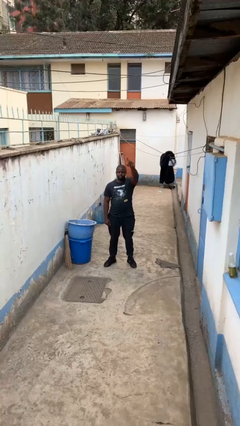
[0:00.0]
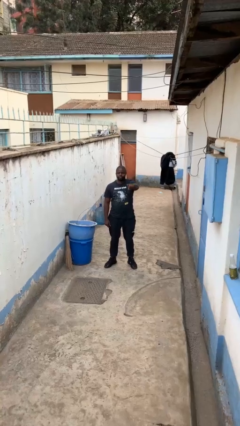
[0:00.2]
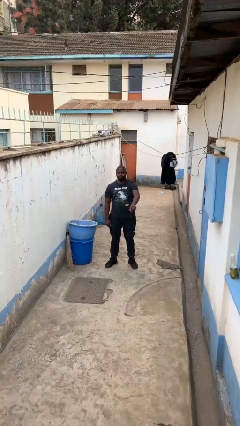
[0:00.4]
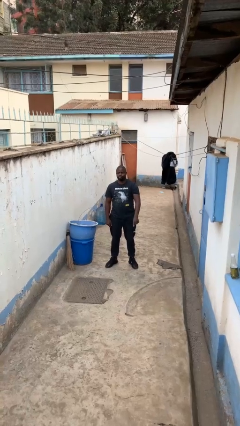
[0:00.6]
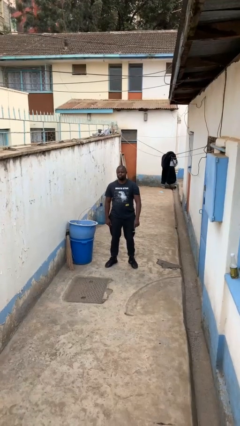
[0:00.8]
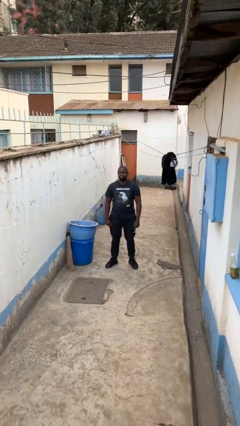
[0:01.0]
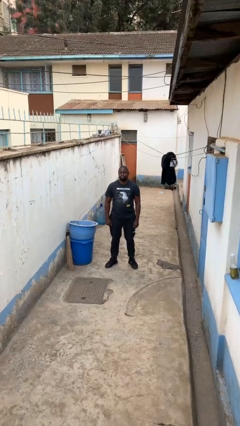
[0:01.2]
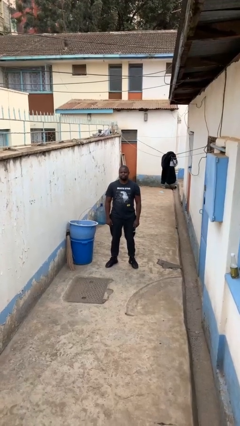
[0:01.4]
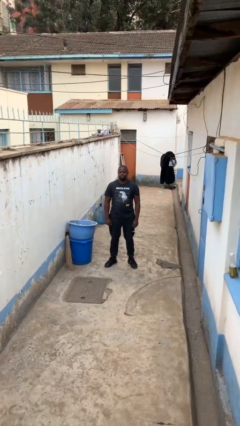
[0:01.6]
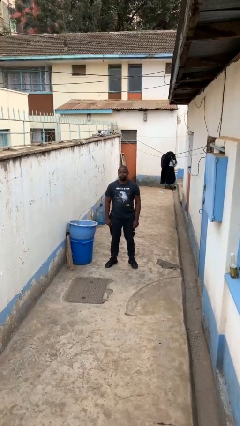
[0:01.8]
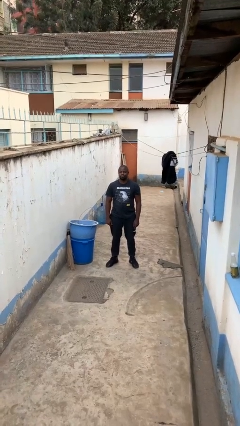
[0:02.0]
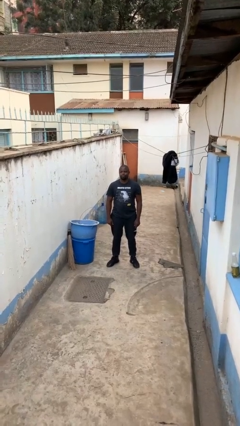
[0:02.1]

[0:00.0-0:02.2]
person gestures swipe down

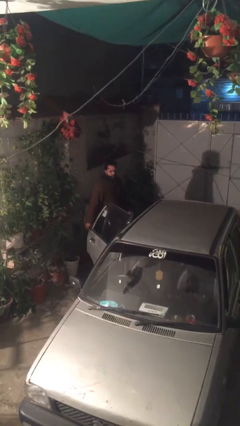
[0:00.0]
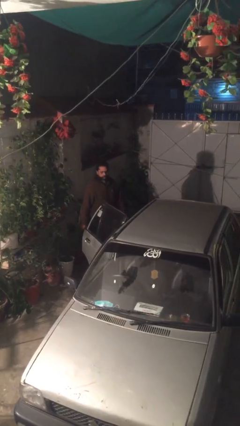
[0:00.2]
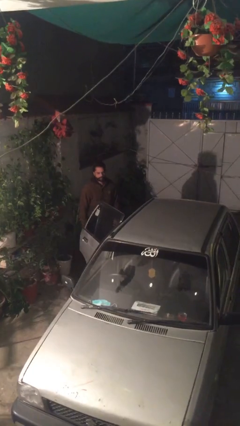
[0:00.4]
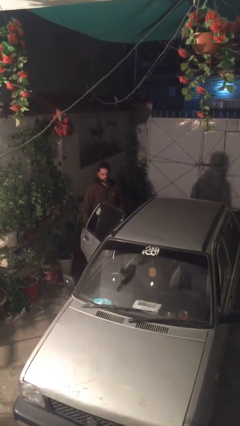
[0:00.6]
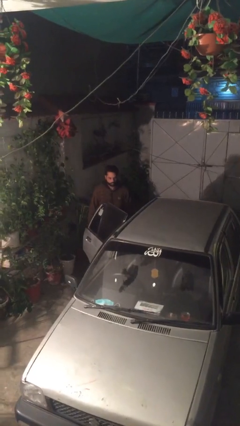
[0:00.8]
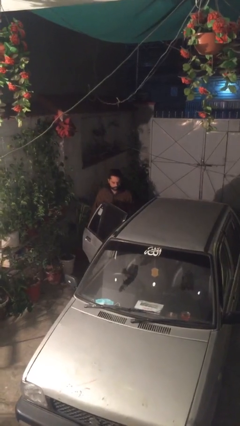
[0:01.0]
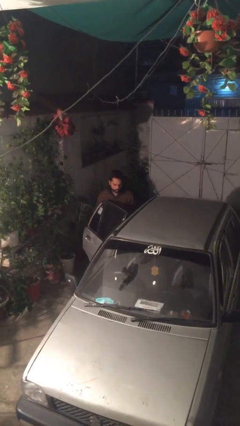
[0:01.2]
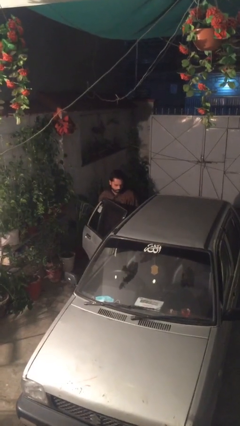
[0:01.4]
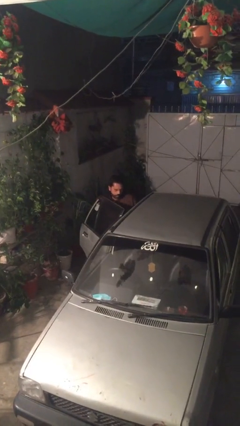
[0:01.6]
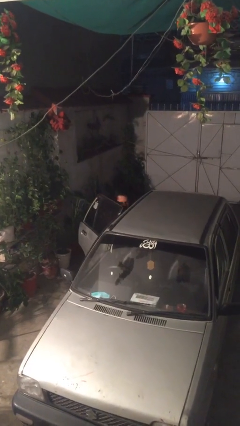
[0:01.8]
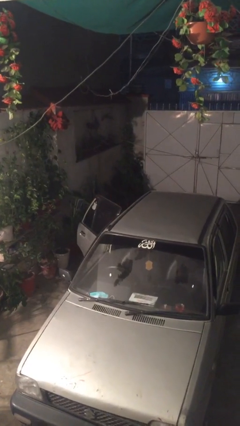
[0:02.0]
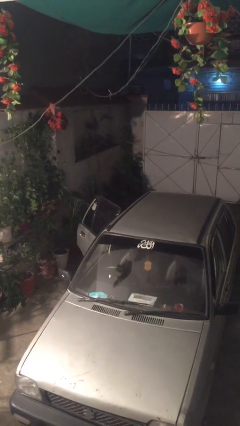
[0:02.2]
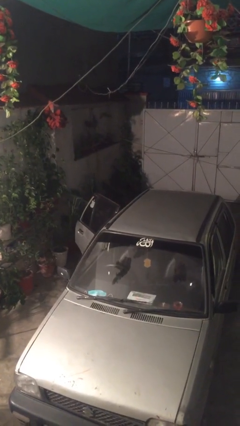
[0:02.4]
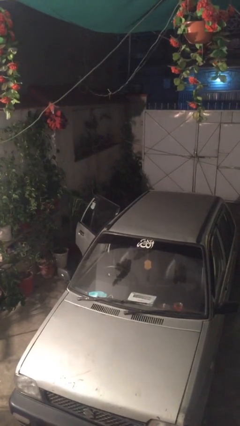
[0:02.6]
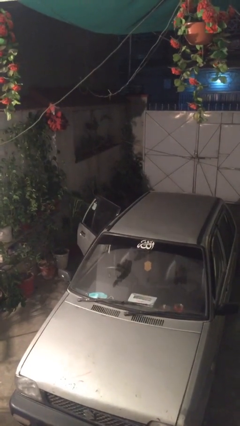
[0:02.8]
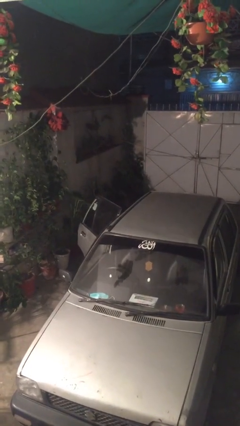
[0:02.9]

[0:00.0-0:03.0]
person enters car

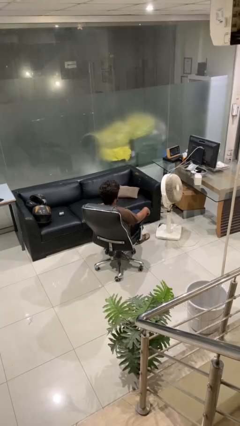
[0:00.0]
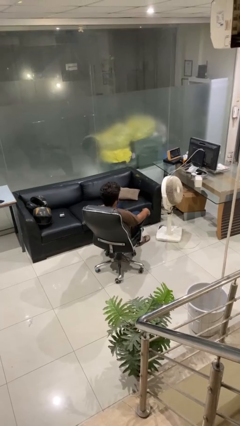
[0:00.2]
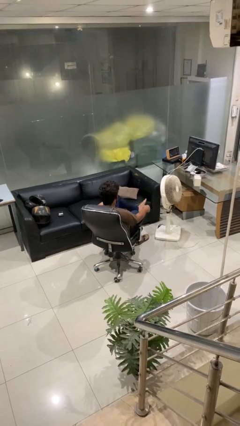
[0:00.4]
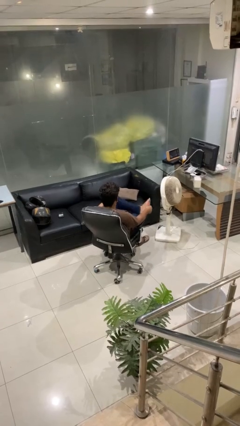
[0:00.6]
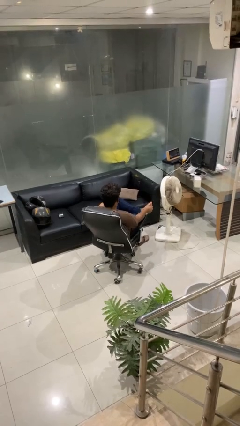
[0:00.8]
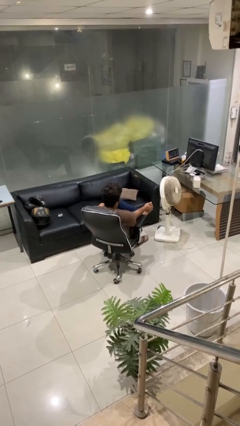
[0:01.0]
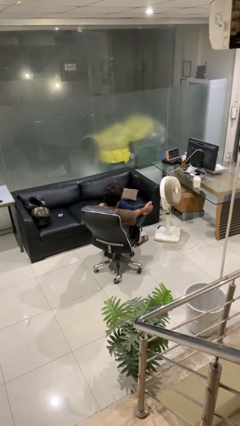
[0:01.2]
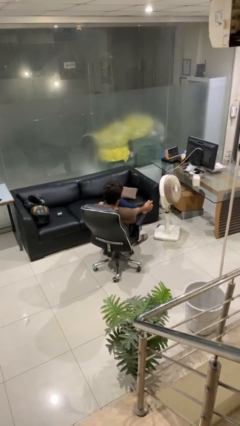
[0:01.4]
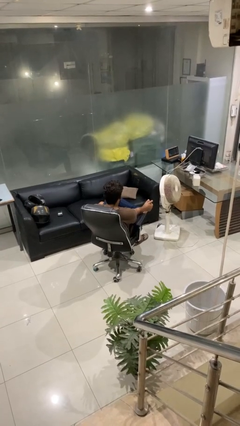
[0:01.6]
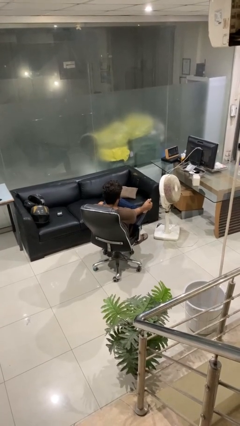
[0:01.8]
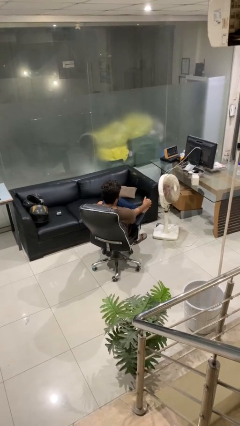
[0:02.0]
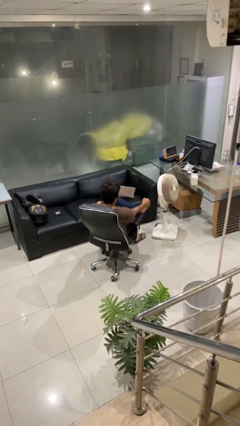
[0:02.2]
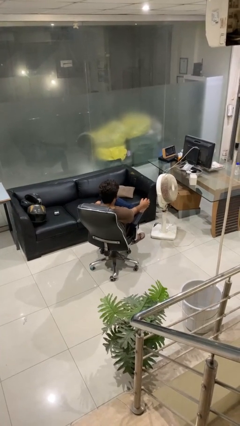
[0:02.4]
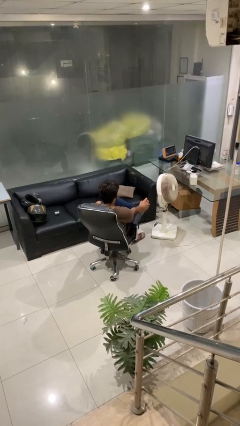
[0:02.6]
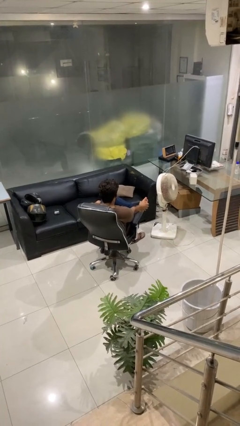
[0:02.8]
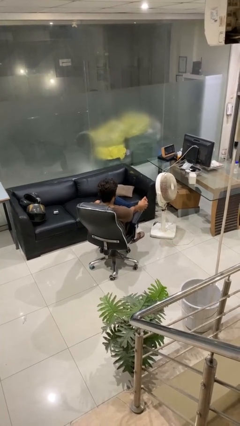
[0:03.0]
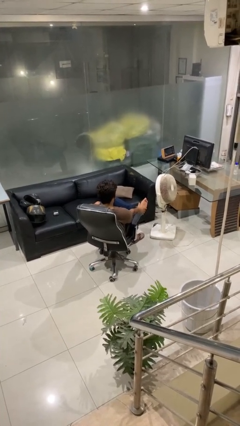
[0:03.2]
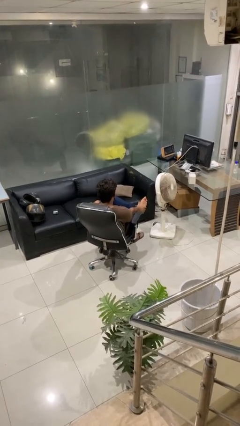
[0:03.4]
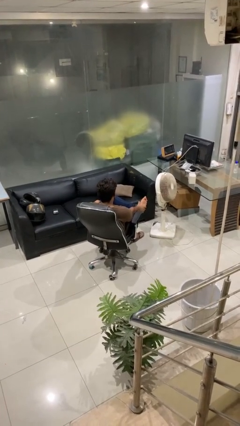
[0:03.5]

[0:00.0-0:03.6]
person rubs foot

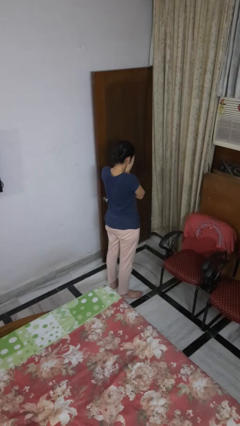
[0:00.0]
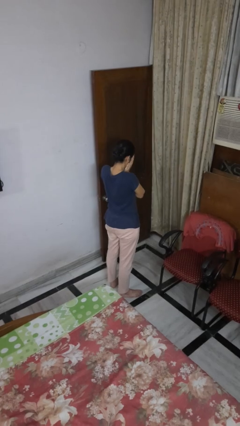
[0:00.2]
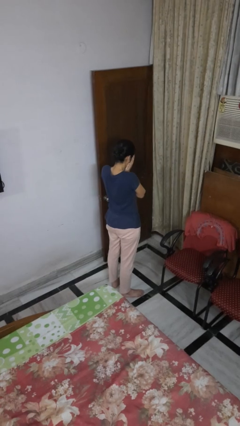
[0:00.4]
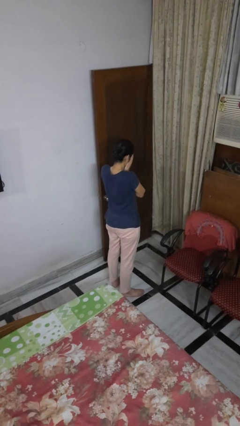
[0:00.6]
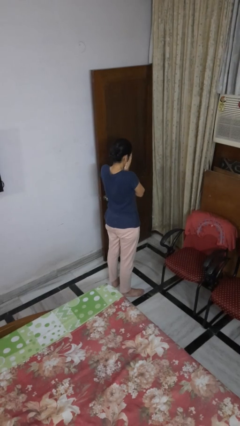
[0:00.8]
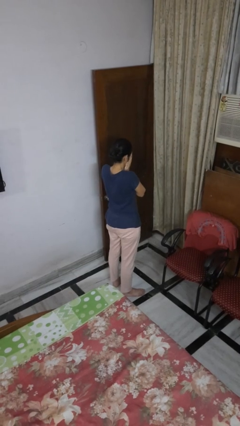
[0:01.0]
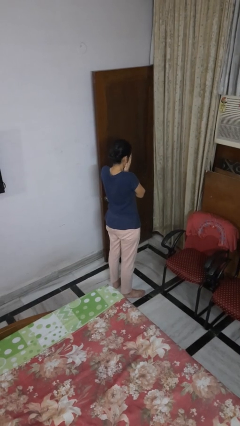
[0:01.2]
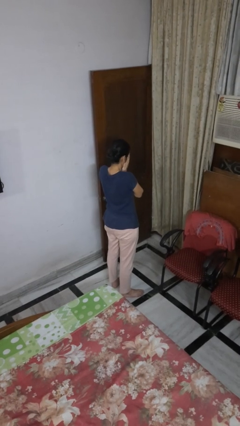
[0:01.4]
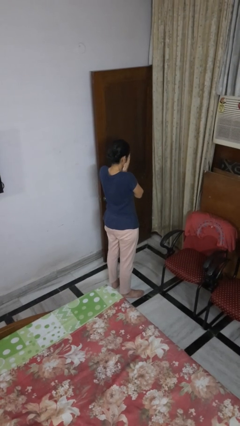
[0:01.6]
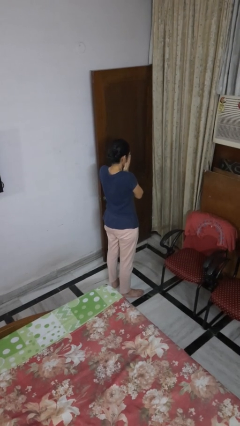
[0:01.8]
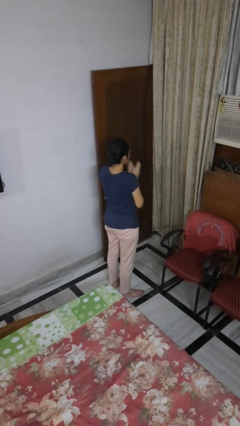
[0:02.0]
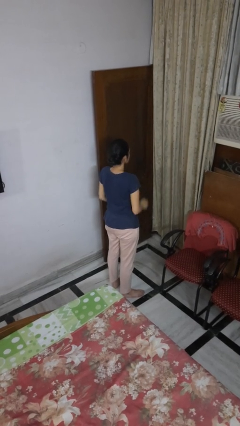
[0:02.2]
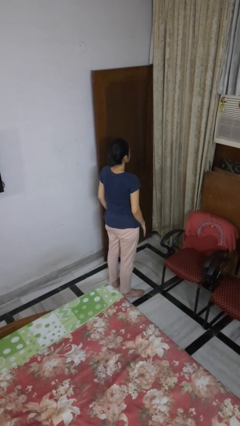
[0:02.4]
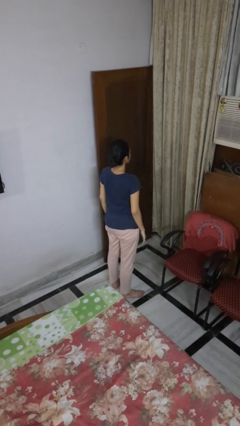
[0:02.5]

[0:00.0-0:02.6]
person covers face with hands

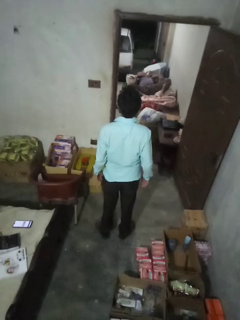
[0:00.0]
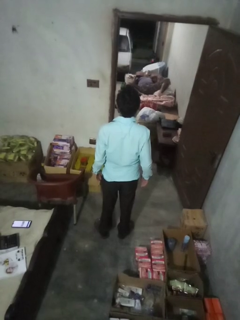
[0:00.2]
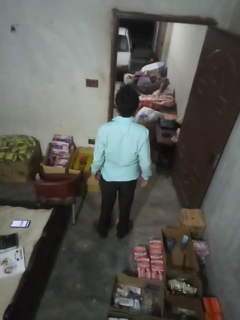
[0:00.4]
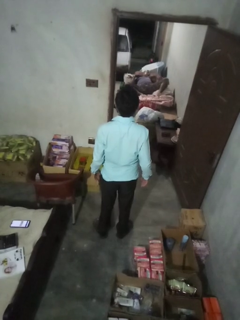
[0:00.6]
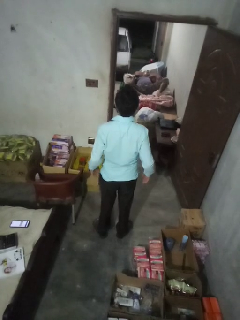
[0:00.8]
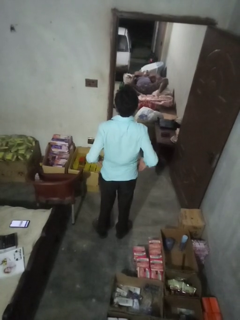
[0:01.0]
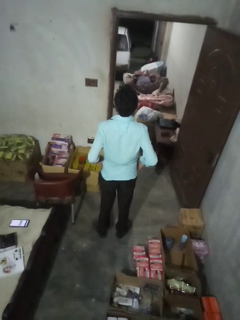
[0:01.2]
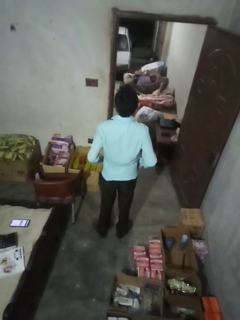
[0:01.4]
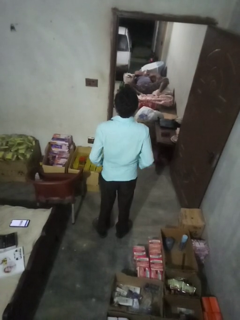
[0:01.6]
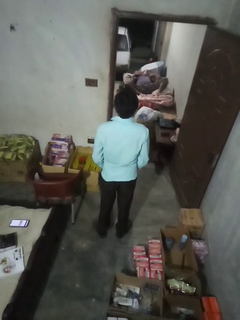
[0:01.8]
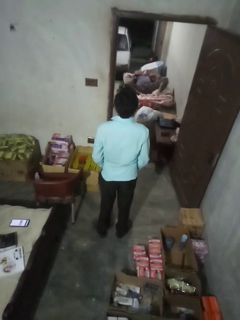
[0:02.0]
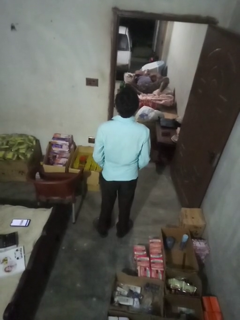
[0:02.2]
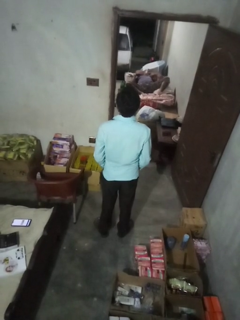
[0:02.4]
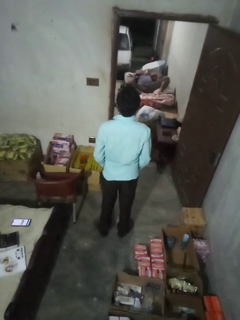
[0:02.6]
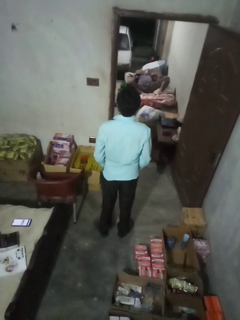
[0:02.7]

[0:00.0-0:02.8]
person puts hands in back pockets

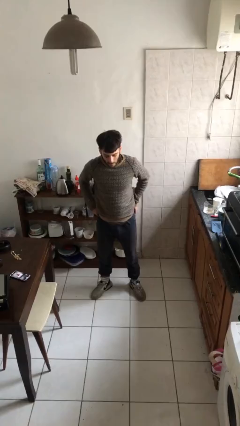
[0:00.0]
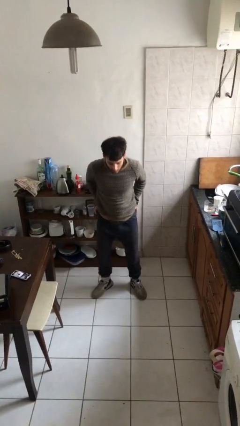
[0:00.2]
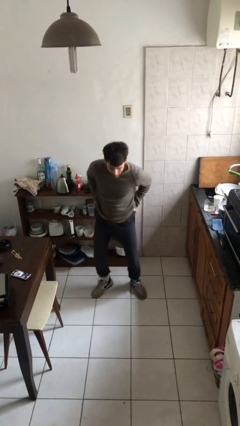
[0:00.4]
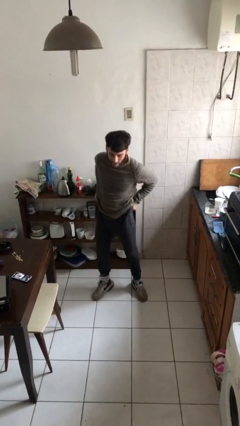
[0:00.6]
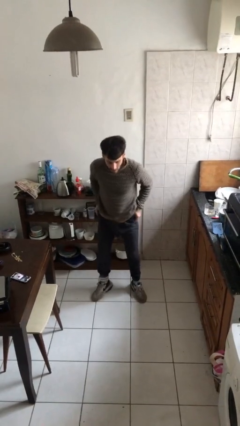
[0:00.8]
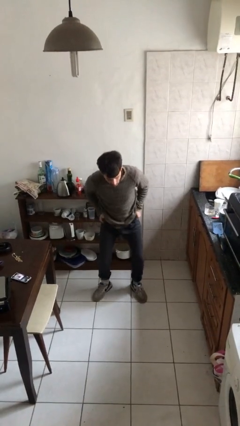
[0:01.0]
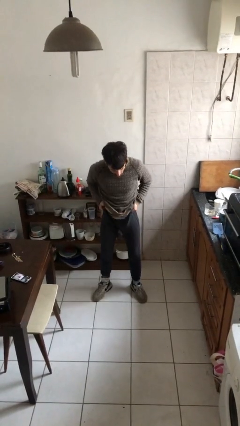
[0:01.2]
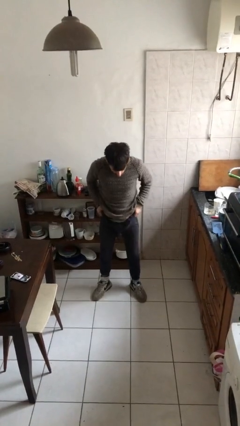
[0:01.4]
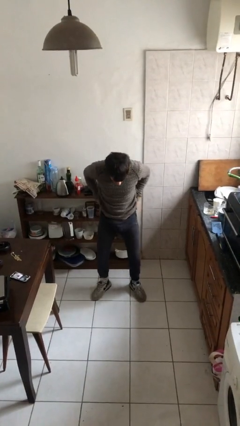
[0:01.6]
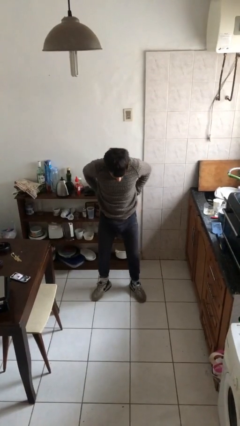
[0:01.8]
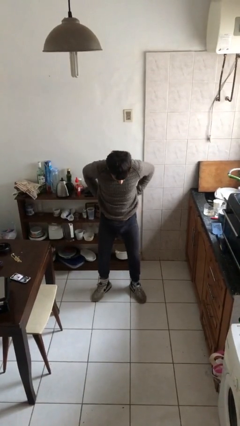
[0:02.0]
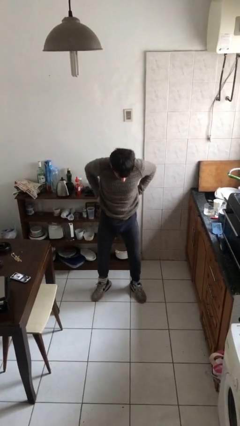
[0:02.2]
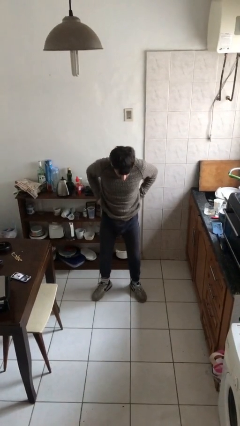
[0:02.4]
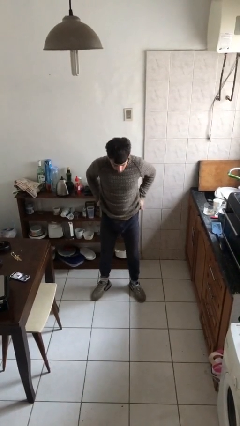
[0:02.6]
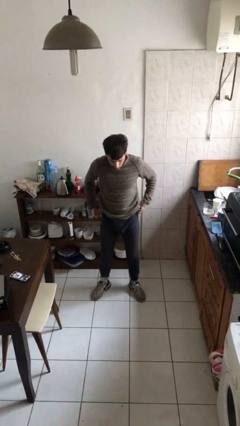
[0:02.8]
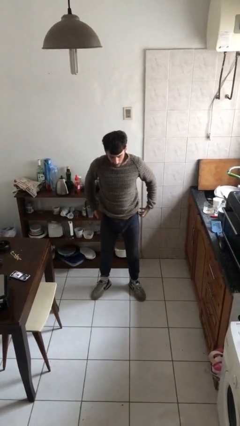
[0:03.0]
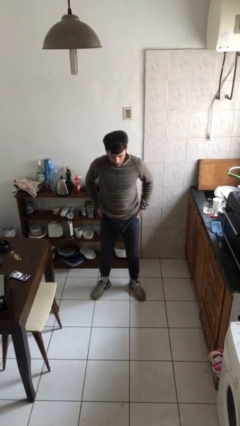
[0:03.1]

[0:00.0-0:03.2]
person hikes up pants

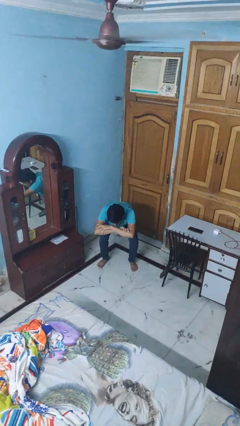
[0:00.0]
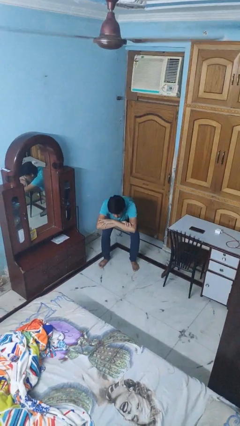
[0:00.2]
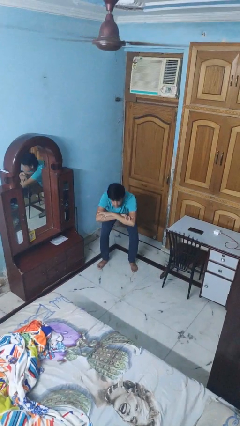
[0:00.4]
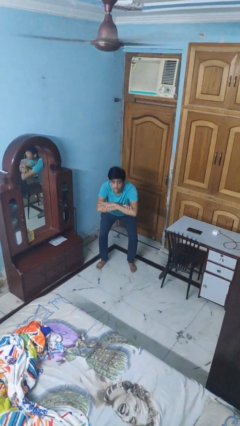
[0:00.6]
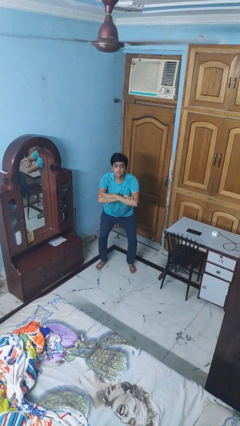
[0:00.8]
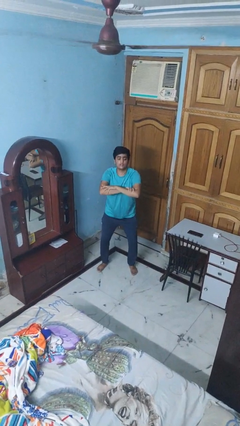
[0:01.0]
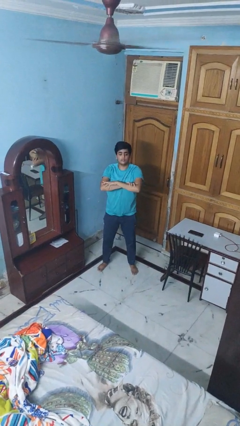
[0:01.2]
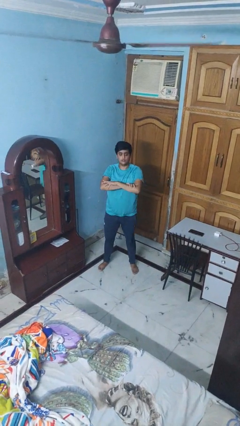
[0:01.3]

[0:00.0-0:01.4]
person stands up
